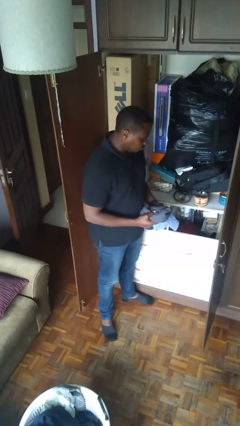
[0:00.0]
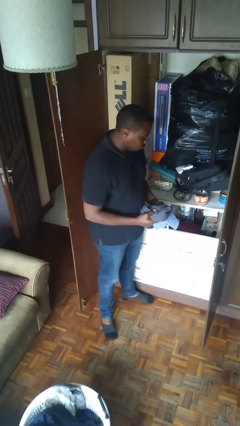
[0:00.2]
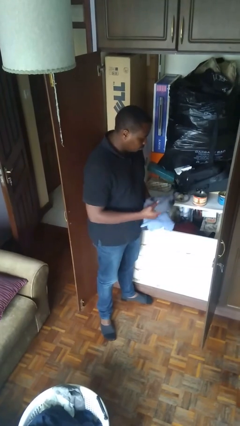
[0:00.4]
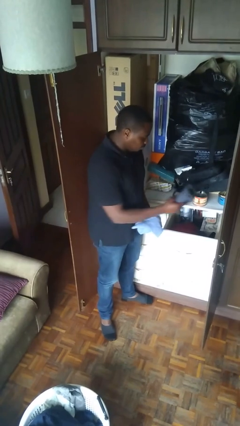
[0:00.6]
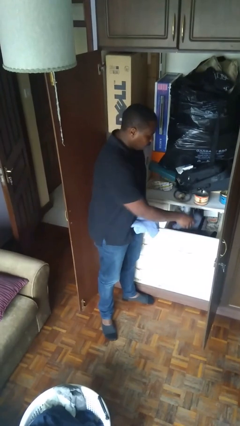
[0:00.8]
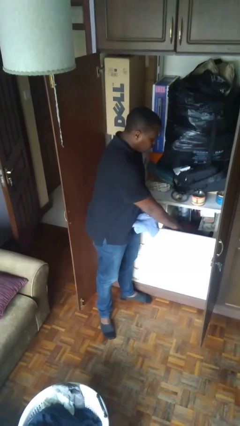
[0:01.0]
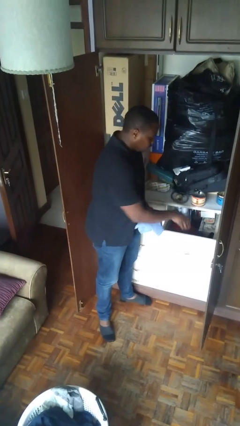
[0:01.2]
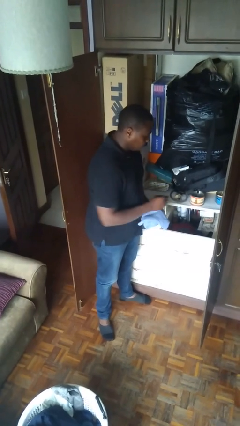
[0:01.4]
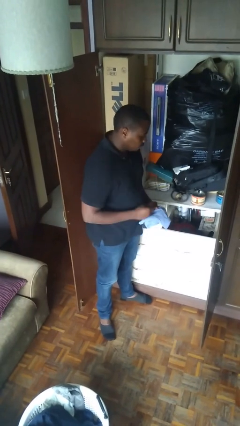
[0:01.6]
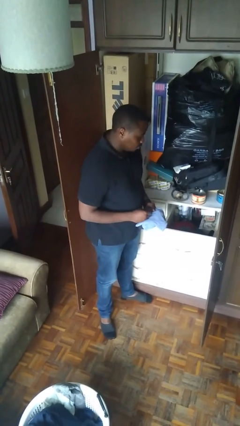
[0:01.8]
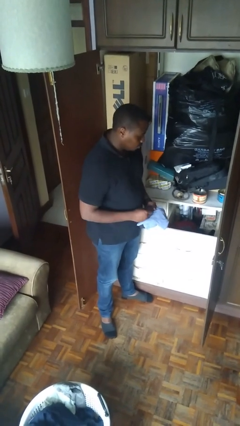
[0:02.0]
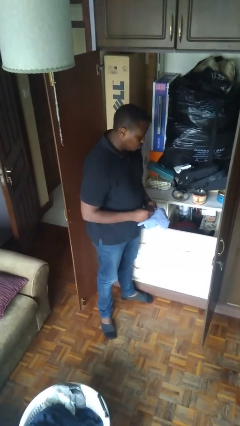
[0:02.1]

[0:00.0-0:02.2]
person puts clothes into dresser

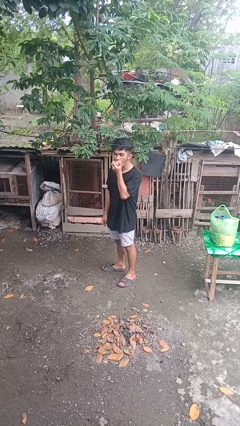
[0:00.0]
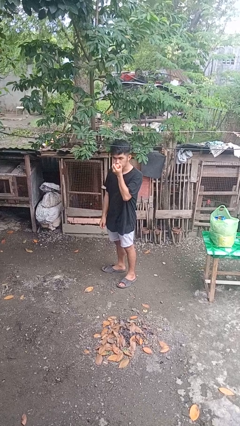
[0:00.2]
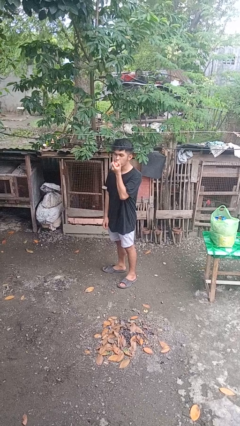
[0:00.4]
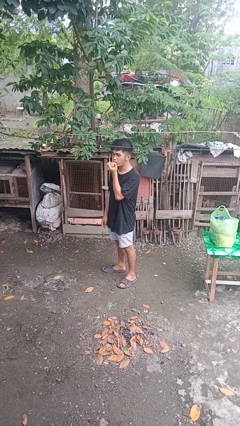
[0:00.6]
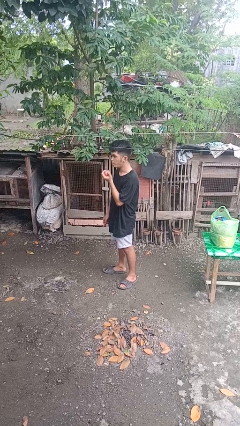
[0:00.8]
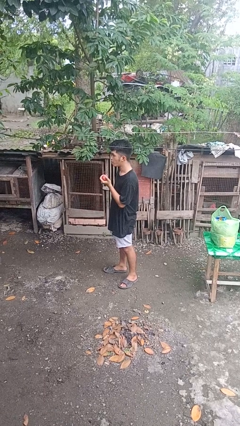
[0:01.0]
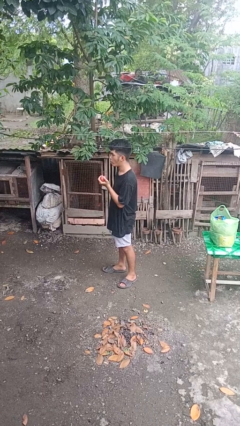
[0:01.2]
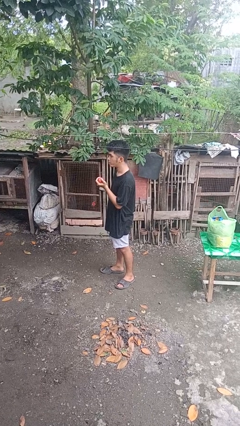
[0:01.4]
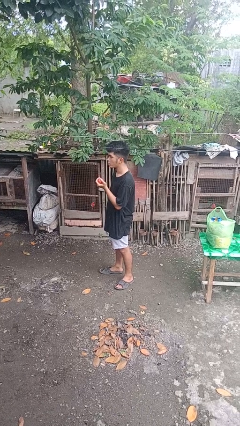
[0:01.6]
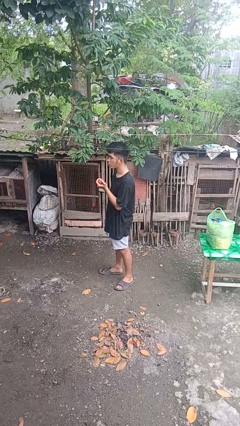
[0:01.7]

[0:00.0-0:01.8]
person eats apple

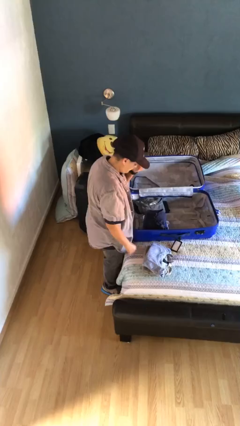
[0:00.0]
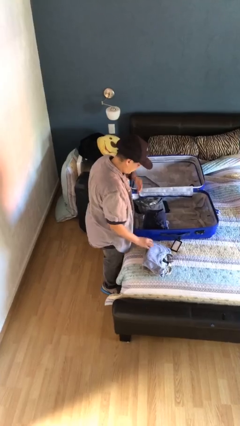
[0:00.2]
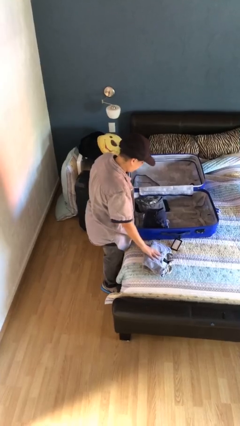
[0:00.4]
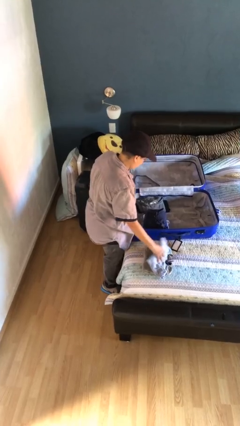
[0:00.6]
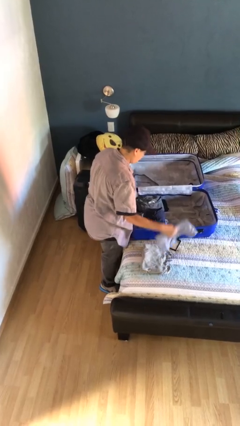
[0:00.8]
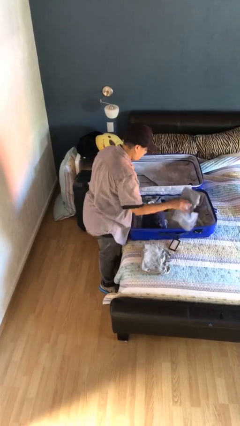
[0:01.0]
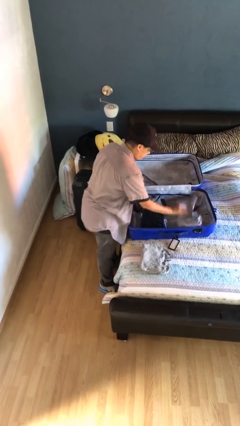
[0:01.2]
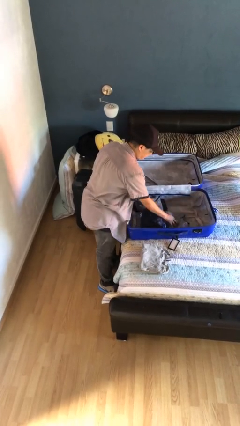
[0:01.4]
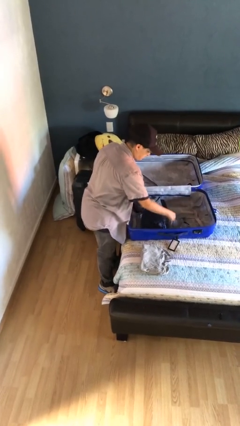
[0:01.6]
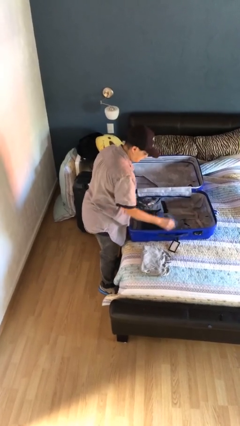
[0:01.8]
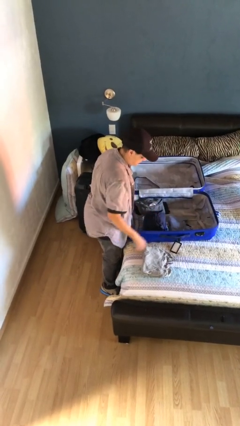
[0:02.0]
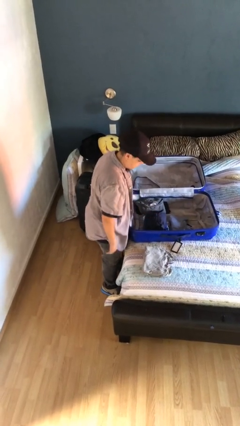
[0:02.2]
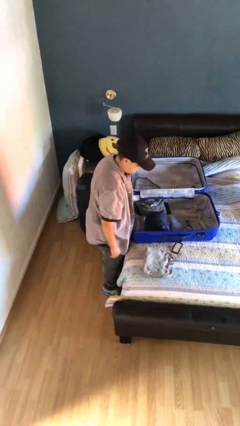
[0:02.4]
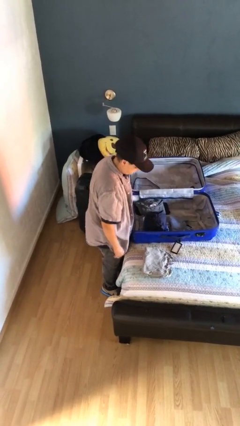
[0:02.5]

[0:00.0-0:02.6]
person loads clothes into suitcase

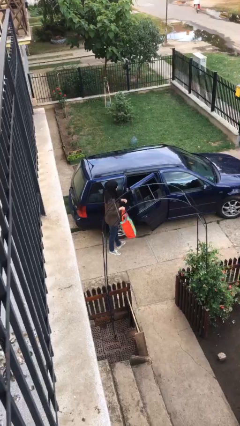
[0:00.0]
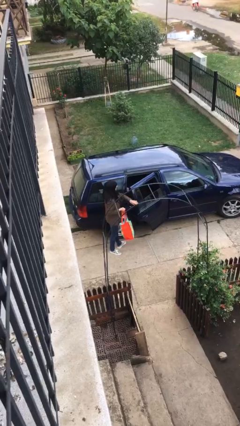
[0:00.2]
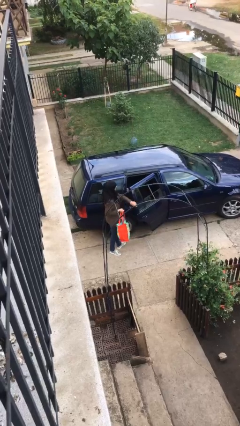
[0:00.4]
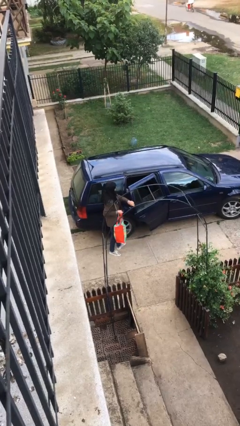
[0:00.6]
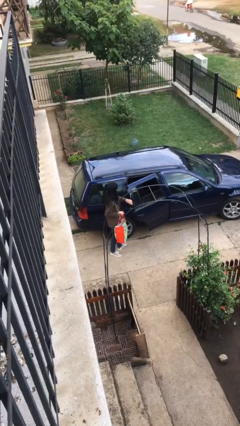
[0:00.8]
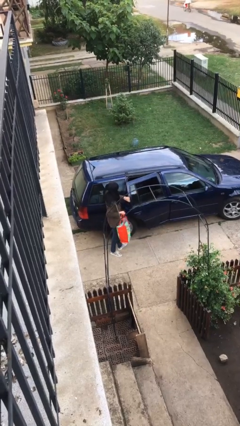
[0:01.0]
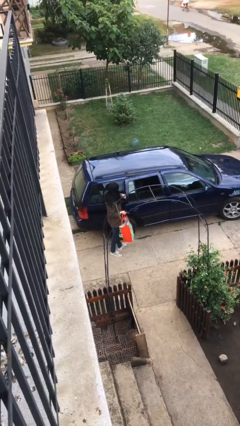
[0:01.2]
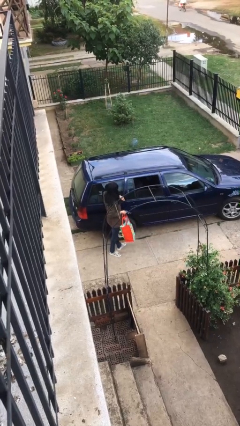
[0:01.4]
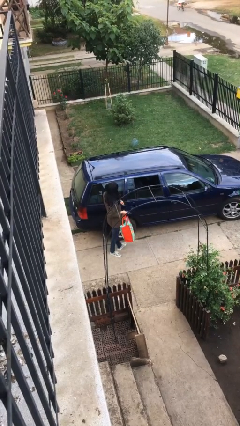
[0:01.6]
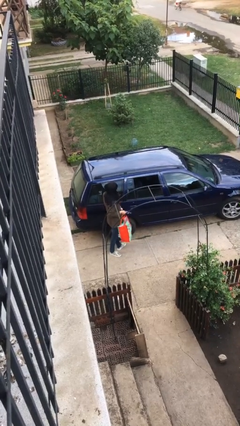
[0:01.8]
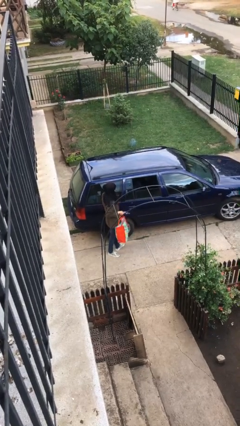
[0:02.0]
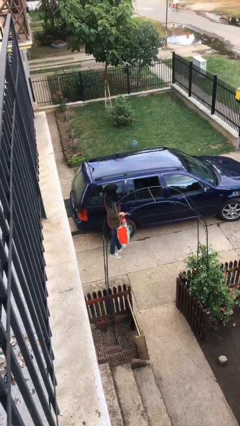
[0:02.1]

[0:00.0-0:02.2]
person closes car door

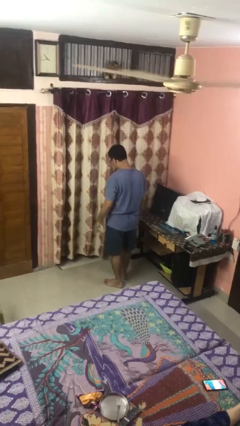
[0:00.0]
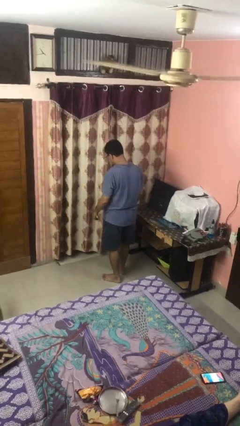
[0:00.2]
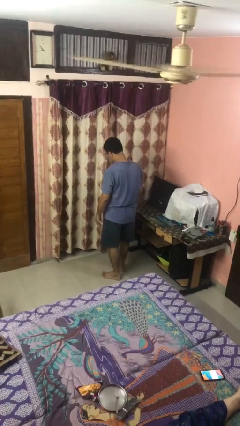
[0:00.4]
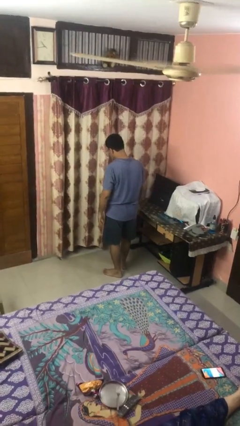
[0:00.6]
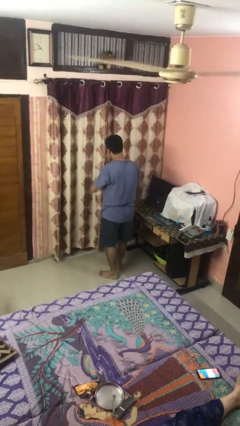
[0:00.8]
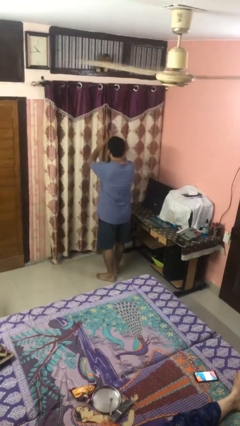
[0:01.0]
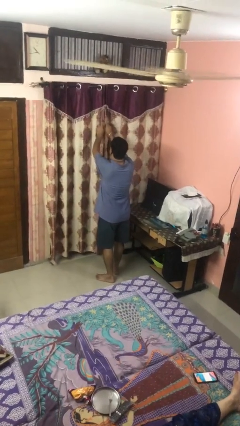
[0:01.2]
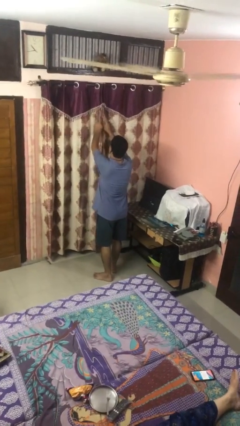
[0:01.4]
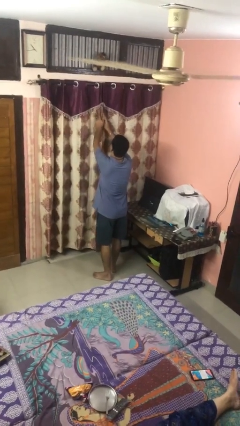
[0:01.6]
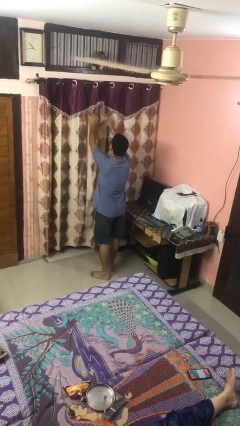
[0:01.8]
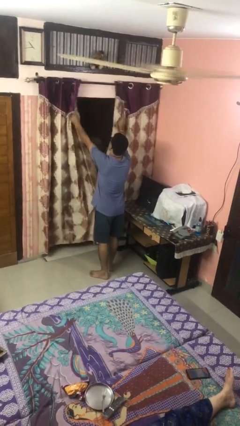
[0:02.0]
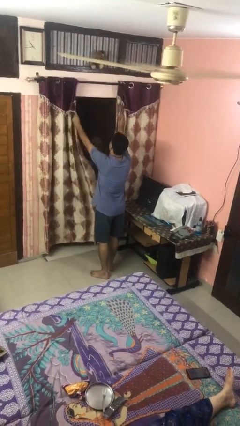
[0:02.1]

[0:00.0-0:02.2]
person opens curtains

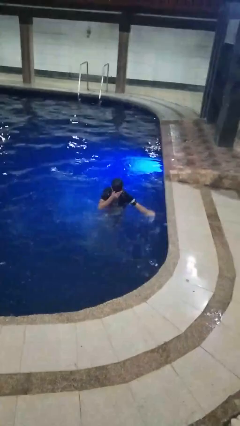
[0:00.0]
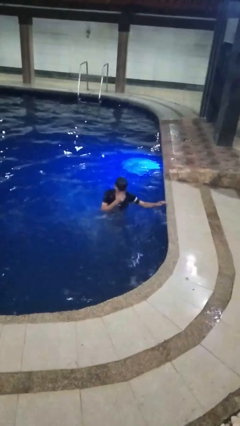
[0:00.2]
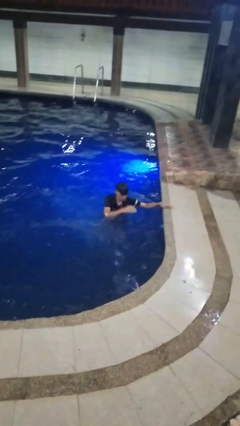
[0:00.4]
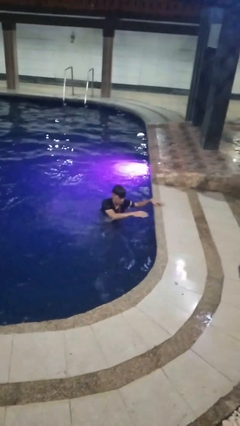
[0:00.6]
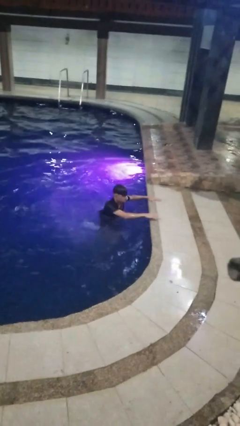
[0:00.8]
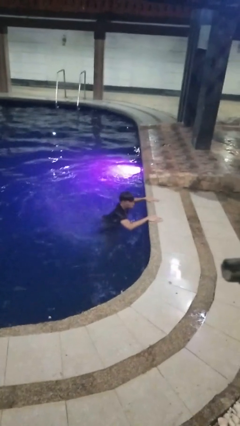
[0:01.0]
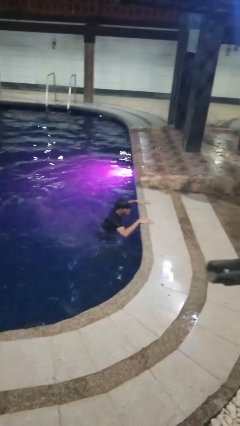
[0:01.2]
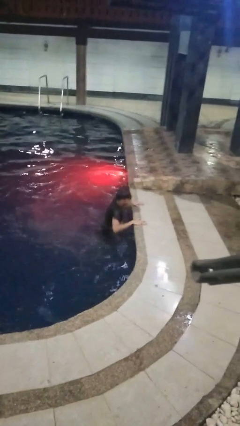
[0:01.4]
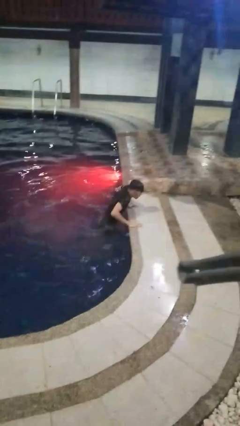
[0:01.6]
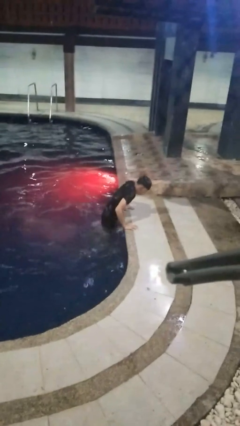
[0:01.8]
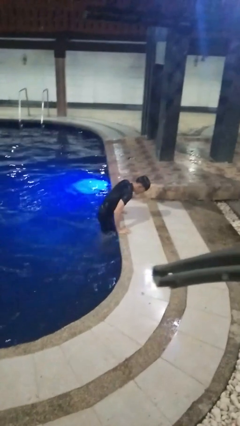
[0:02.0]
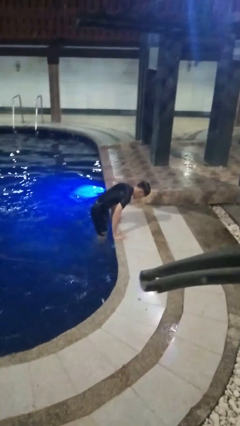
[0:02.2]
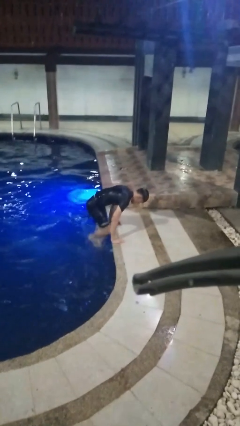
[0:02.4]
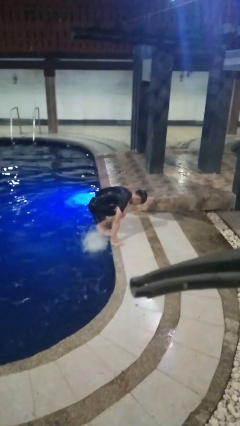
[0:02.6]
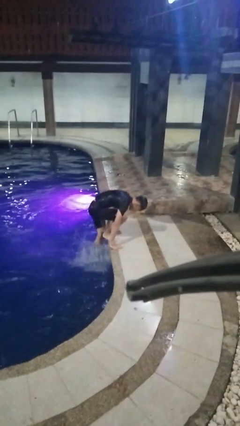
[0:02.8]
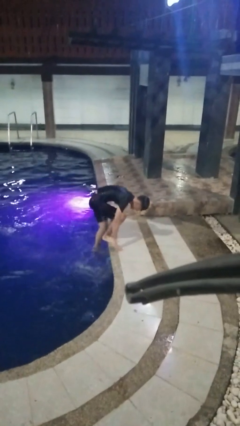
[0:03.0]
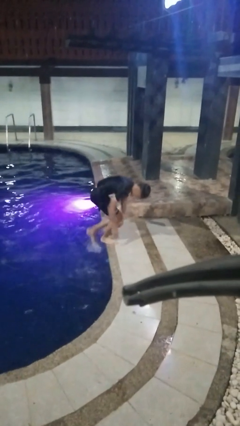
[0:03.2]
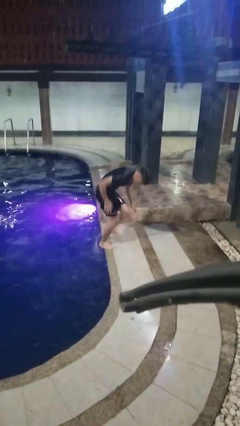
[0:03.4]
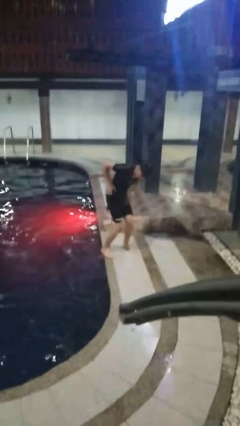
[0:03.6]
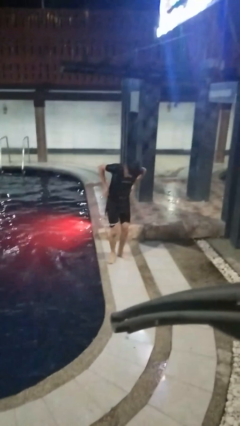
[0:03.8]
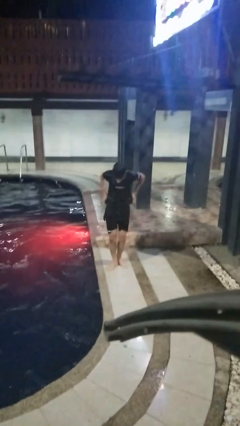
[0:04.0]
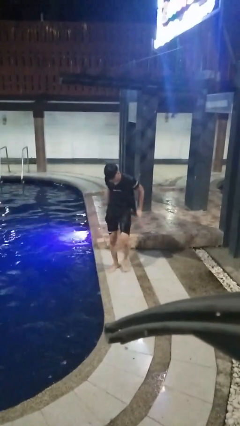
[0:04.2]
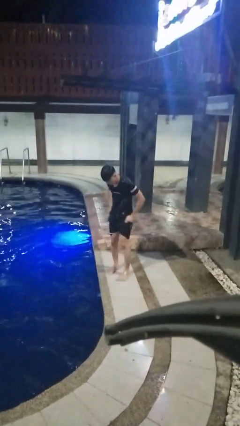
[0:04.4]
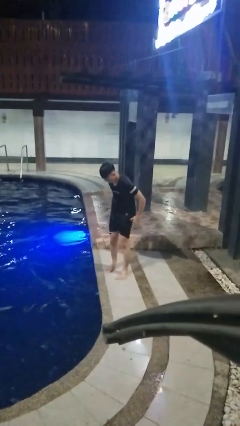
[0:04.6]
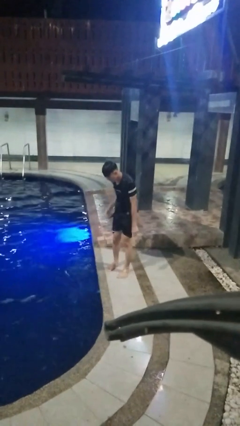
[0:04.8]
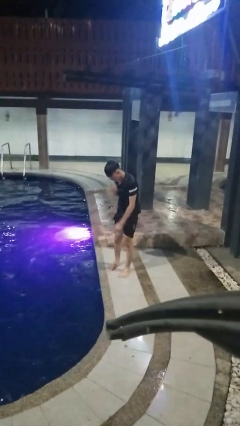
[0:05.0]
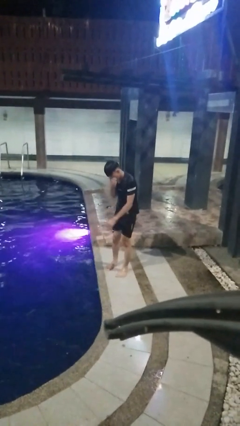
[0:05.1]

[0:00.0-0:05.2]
person exits pool

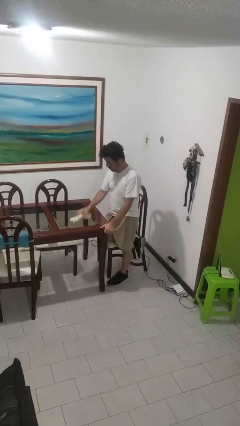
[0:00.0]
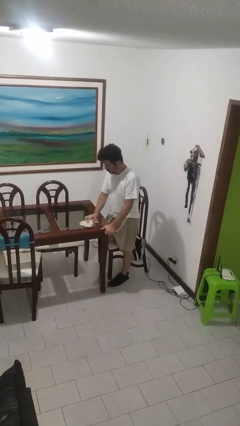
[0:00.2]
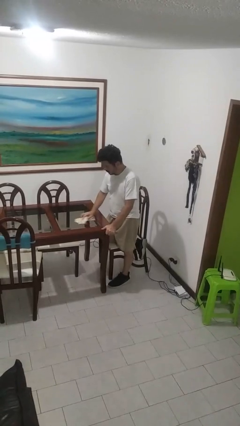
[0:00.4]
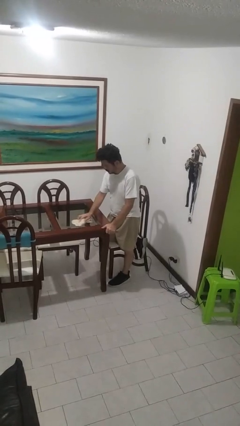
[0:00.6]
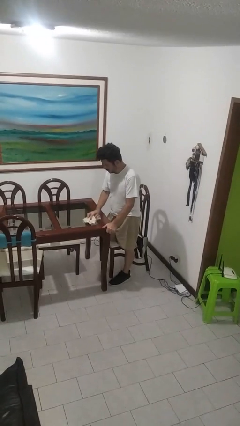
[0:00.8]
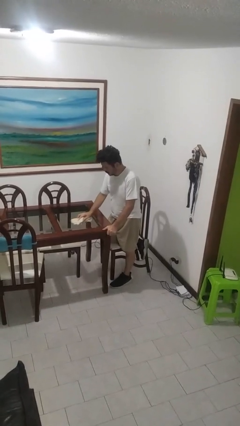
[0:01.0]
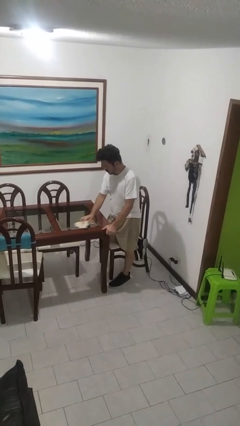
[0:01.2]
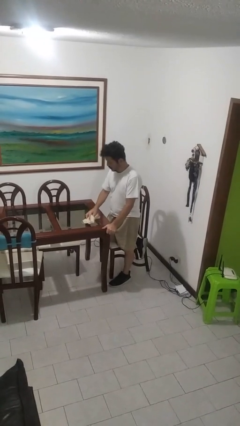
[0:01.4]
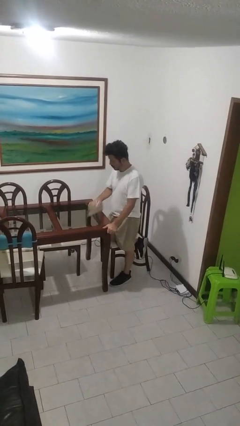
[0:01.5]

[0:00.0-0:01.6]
person cleans table with rag
